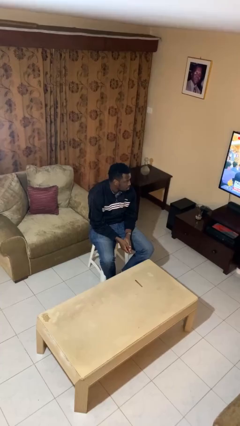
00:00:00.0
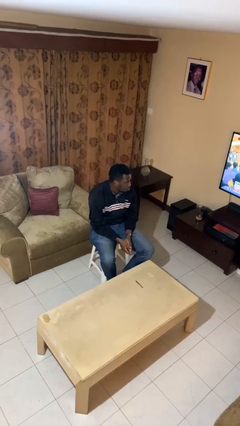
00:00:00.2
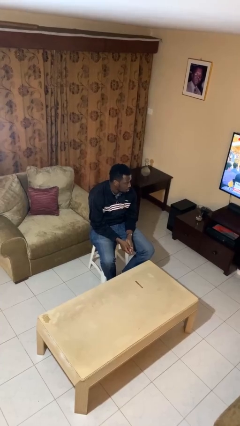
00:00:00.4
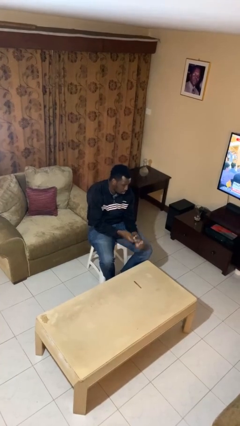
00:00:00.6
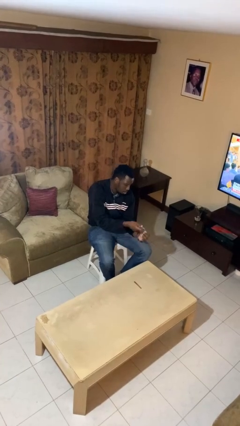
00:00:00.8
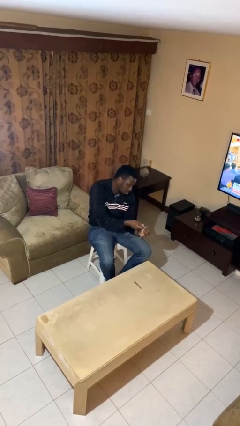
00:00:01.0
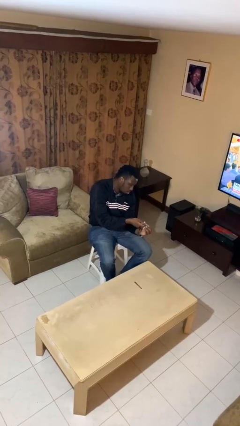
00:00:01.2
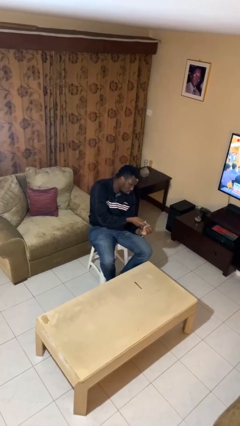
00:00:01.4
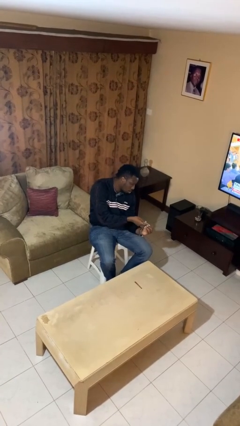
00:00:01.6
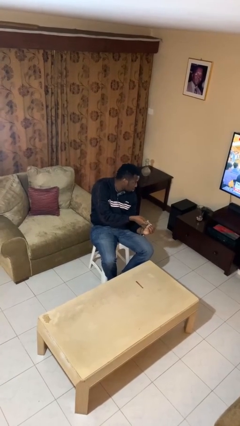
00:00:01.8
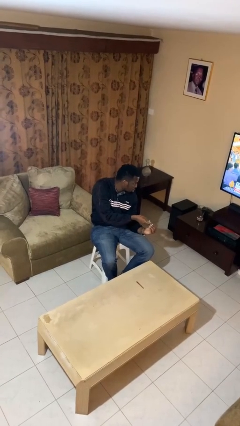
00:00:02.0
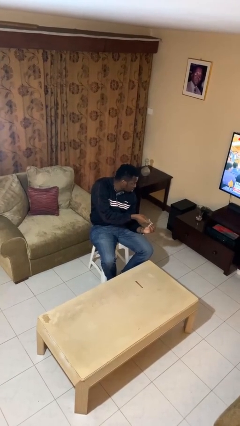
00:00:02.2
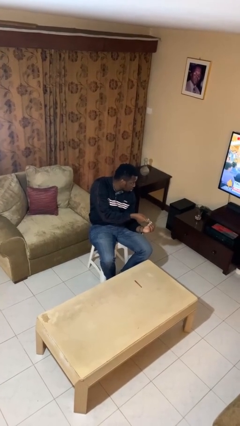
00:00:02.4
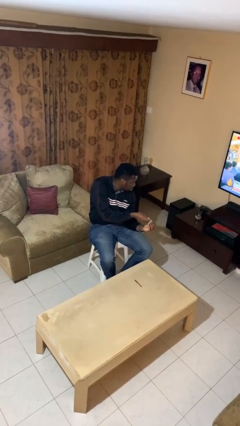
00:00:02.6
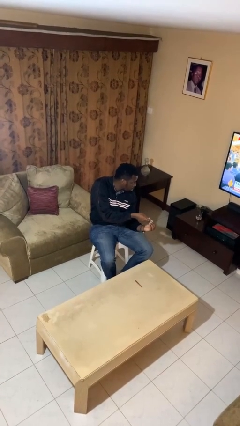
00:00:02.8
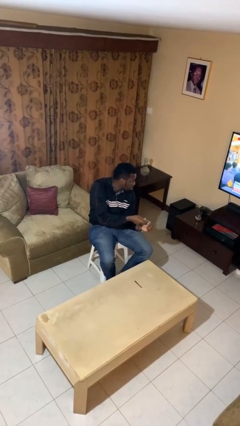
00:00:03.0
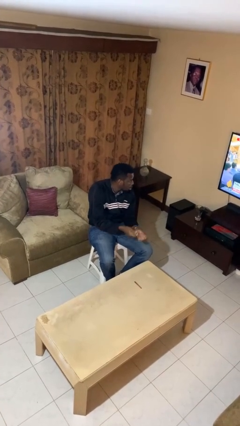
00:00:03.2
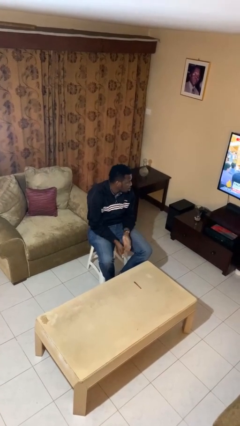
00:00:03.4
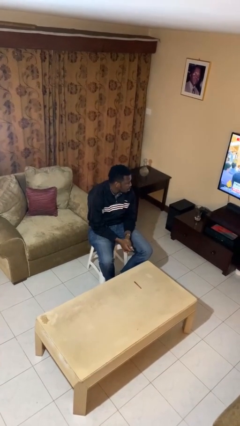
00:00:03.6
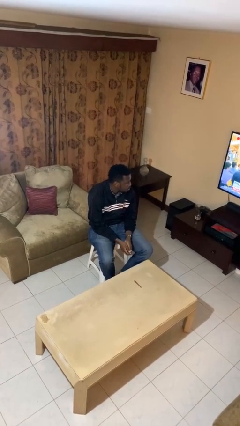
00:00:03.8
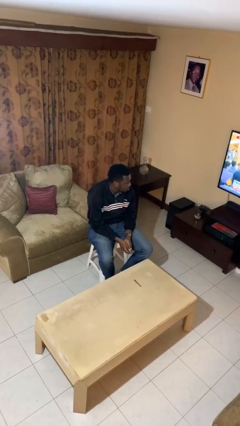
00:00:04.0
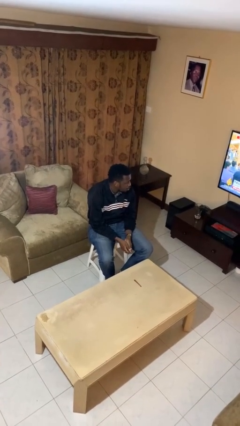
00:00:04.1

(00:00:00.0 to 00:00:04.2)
person clips fingernails

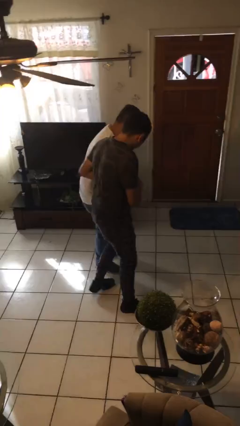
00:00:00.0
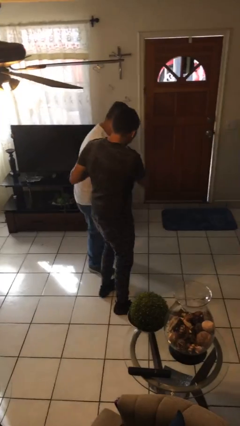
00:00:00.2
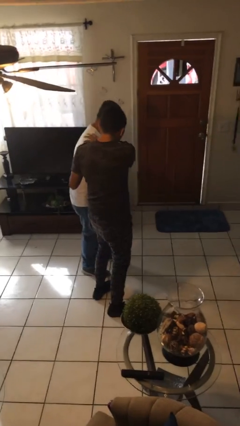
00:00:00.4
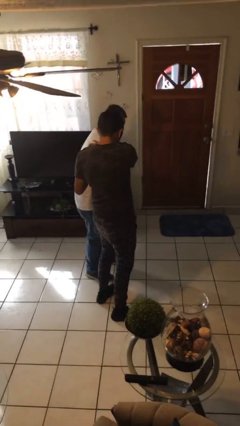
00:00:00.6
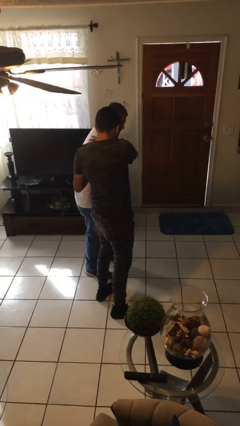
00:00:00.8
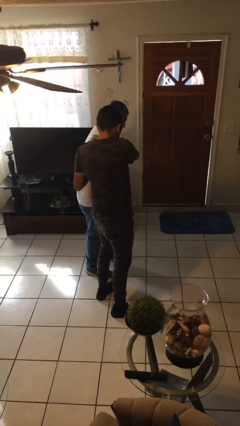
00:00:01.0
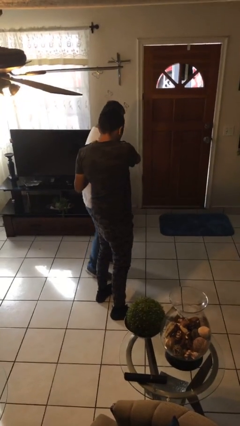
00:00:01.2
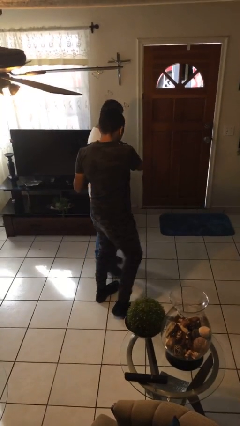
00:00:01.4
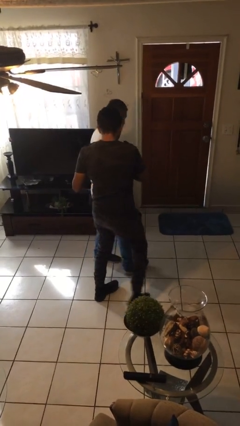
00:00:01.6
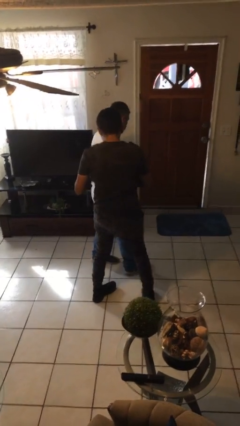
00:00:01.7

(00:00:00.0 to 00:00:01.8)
person bumps into person

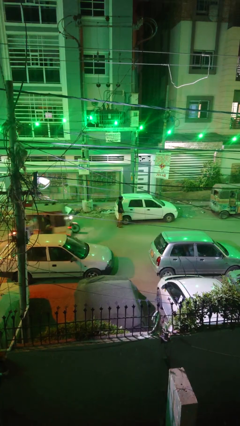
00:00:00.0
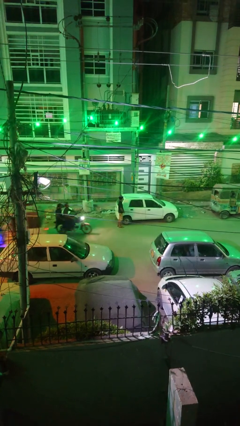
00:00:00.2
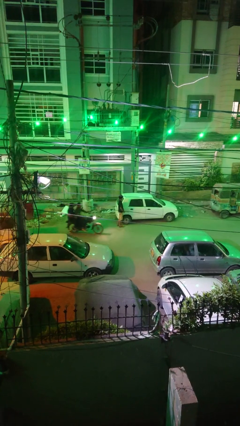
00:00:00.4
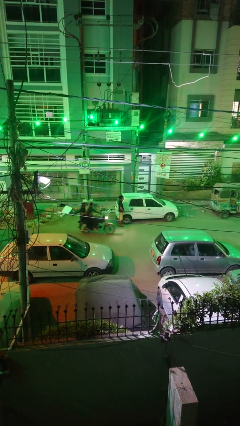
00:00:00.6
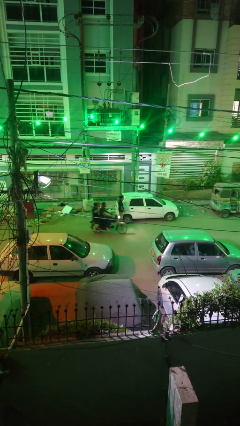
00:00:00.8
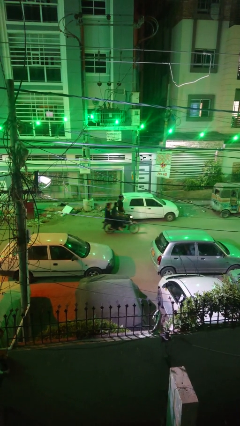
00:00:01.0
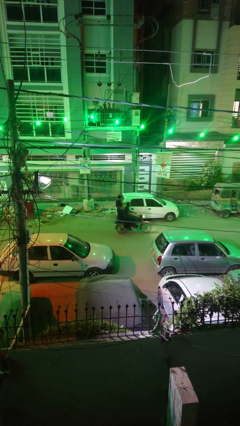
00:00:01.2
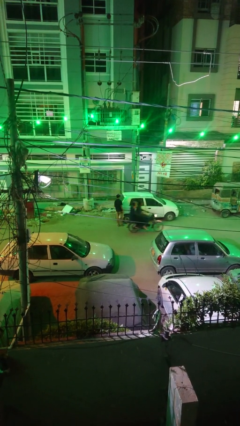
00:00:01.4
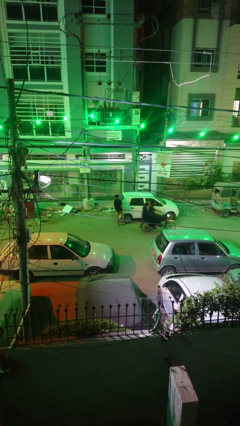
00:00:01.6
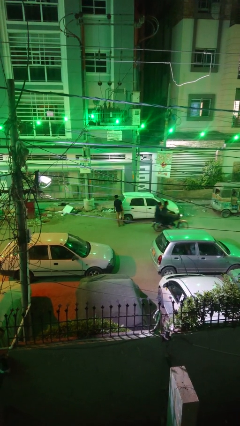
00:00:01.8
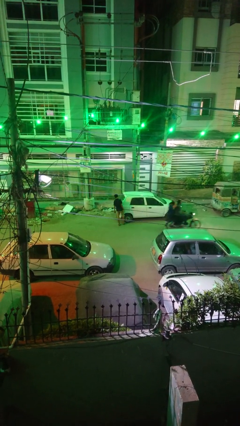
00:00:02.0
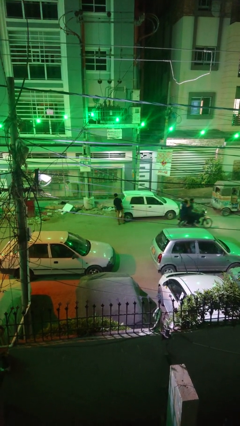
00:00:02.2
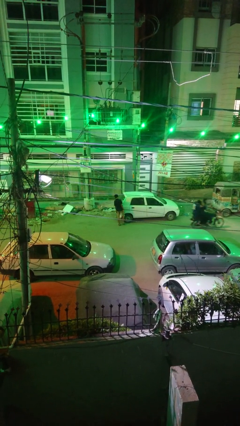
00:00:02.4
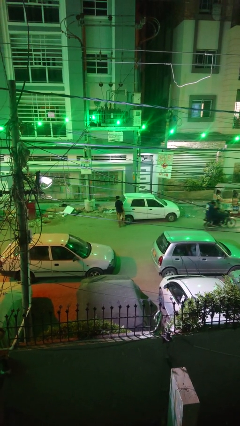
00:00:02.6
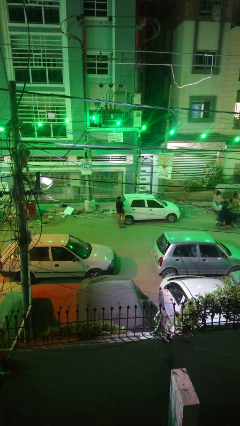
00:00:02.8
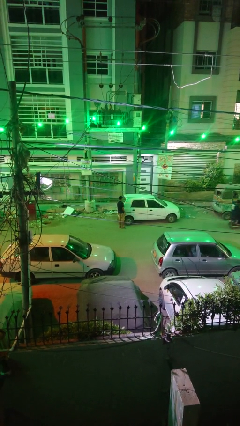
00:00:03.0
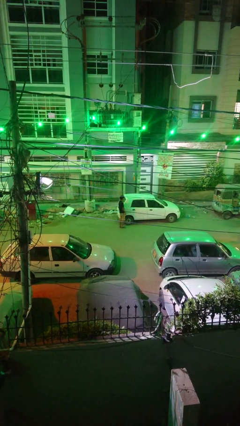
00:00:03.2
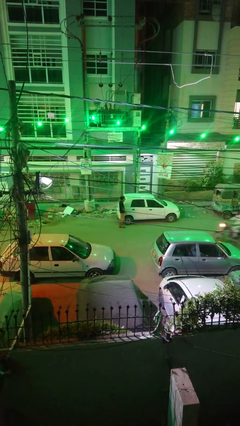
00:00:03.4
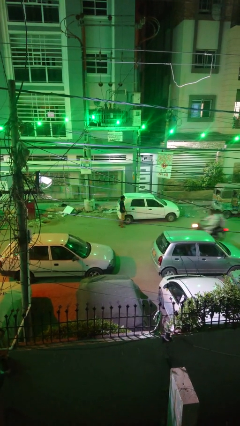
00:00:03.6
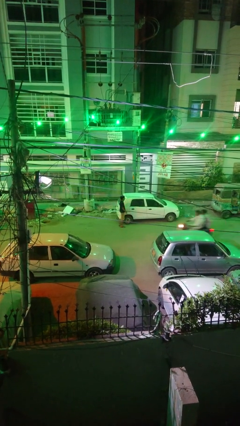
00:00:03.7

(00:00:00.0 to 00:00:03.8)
person kicks car tires

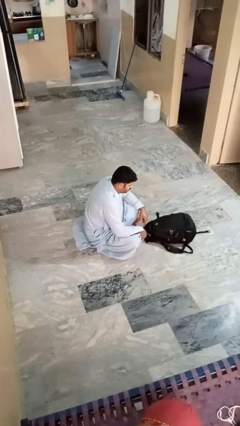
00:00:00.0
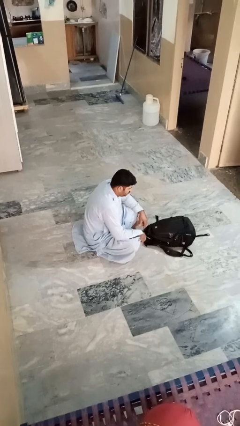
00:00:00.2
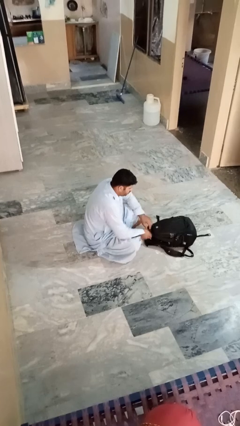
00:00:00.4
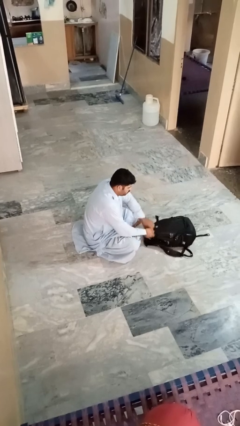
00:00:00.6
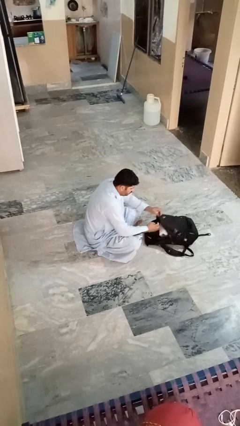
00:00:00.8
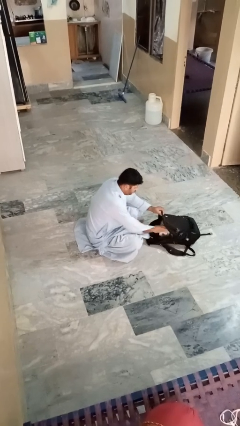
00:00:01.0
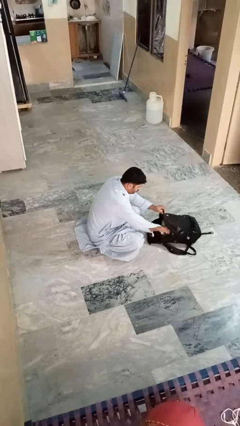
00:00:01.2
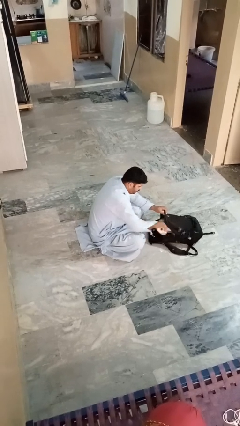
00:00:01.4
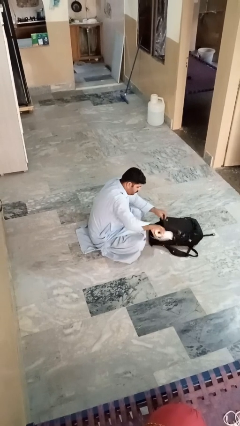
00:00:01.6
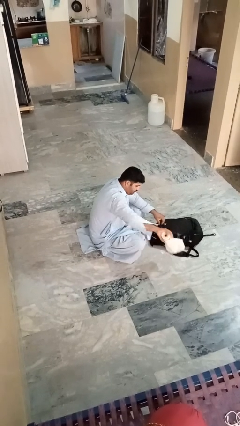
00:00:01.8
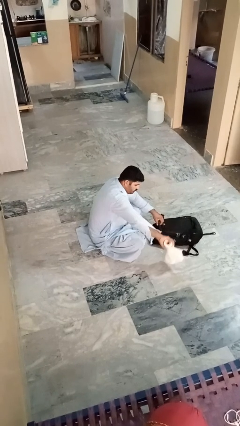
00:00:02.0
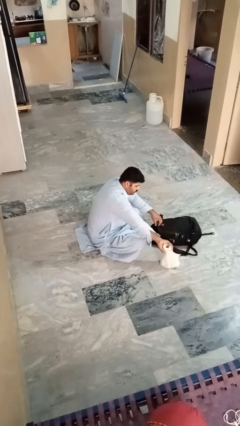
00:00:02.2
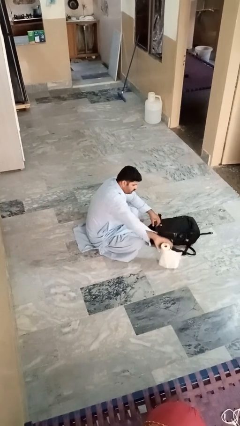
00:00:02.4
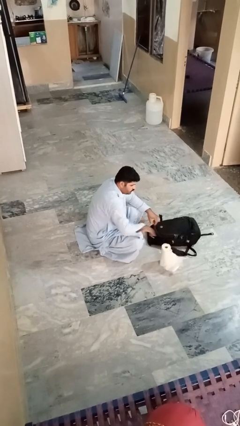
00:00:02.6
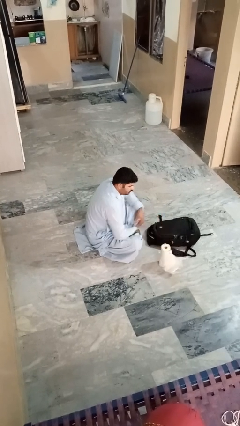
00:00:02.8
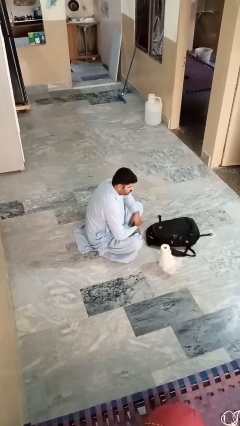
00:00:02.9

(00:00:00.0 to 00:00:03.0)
person takes object from bag

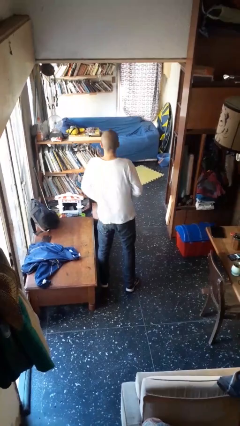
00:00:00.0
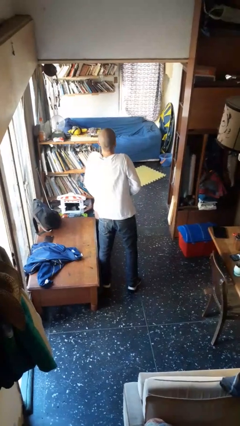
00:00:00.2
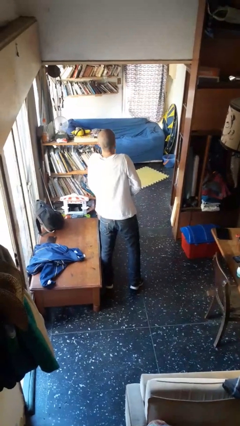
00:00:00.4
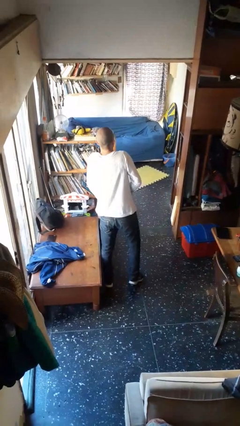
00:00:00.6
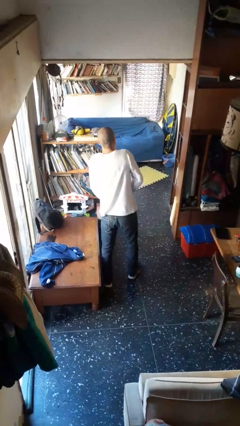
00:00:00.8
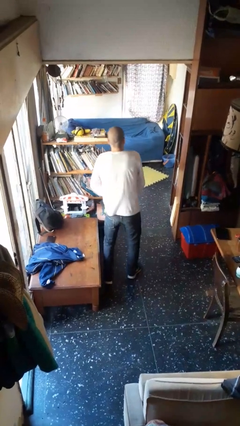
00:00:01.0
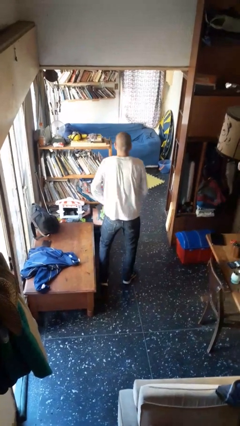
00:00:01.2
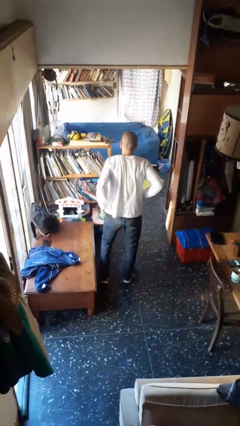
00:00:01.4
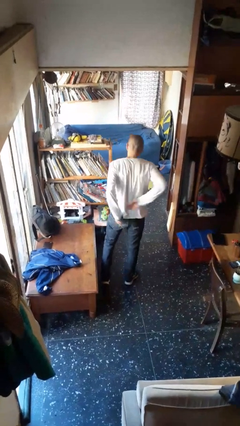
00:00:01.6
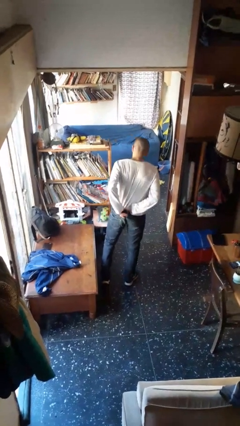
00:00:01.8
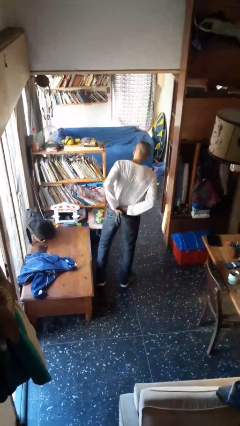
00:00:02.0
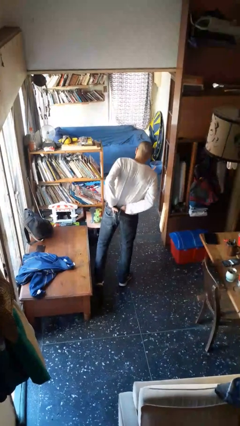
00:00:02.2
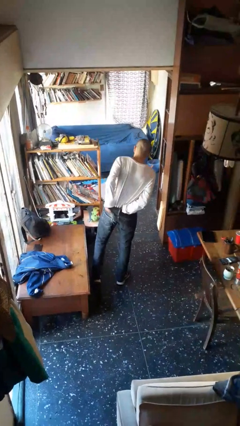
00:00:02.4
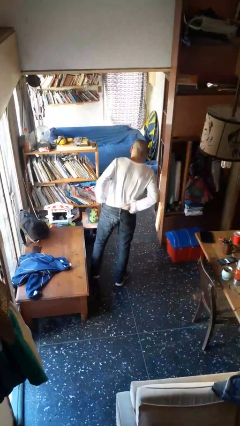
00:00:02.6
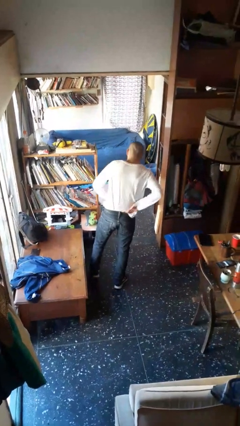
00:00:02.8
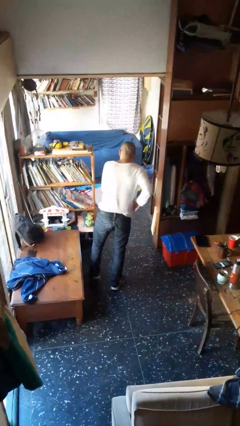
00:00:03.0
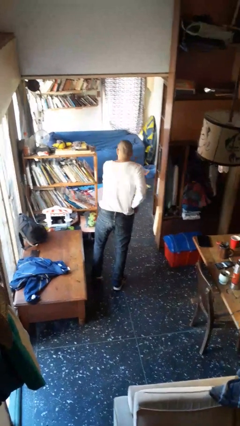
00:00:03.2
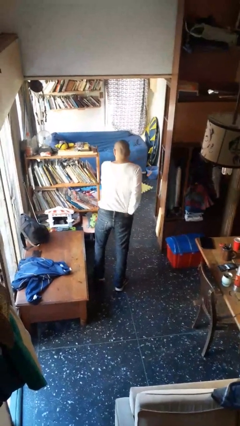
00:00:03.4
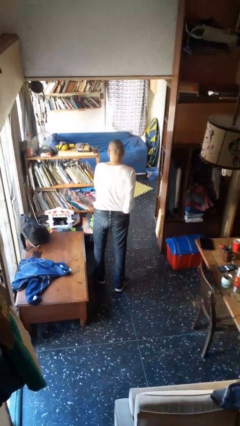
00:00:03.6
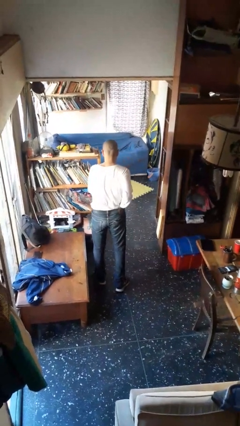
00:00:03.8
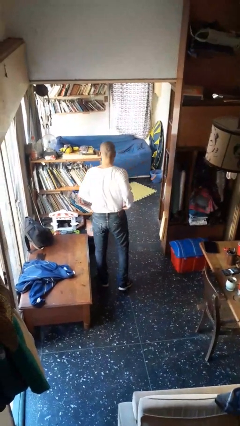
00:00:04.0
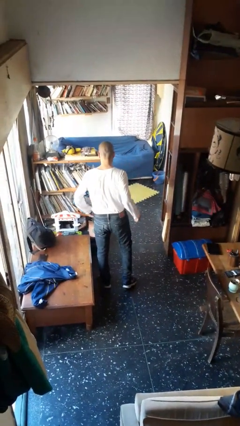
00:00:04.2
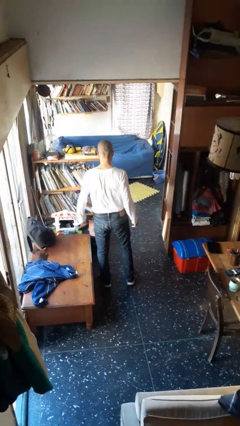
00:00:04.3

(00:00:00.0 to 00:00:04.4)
person tucks in shirt

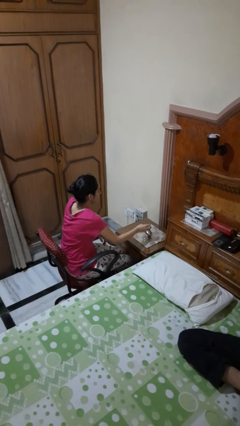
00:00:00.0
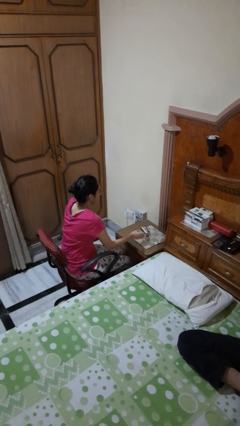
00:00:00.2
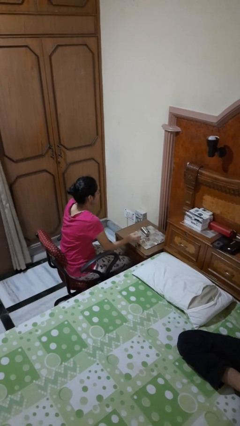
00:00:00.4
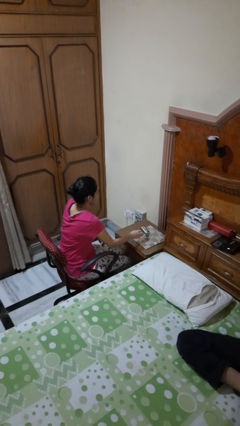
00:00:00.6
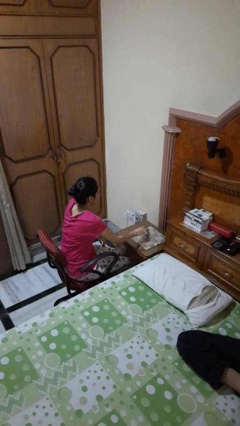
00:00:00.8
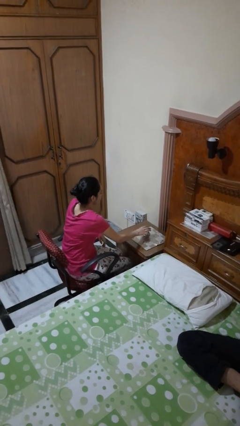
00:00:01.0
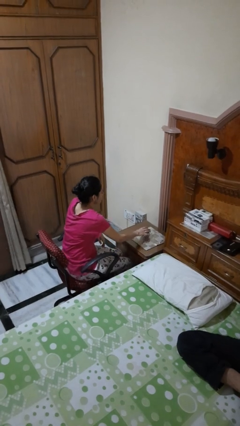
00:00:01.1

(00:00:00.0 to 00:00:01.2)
person knocks over glass
